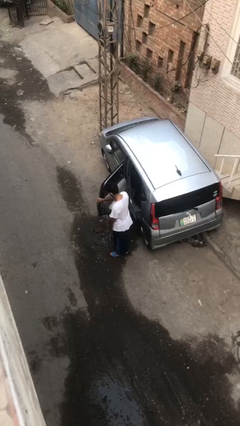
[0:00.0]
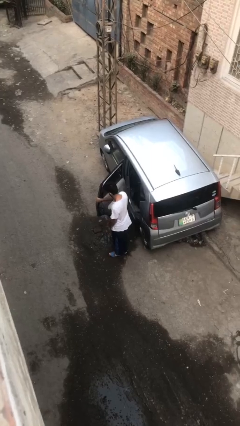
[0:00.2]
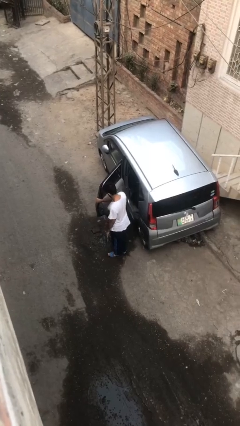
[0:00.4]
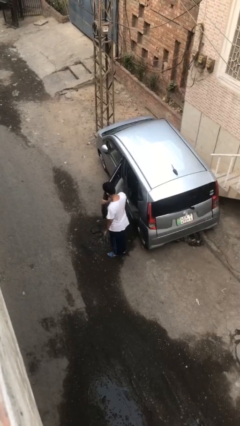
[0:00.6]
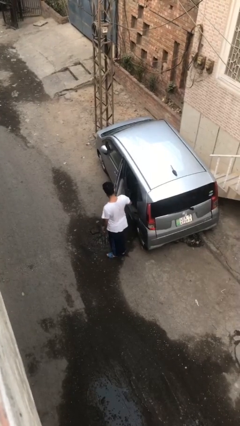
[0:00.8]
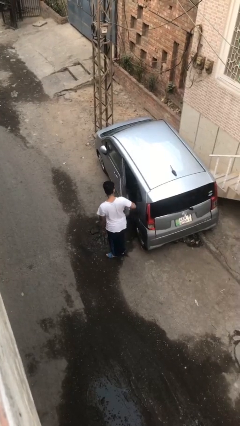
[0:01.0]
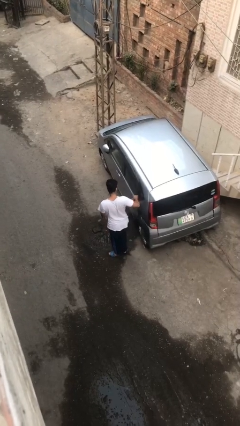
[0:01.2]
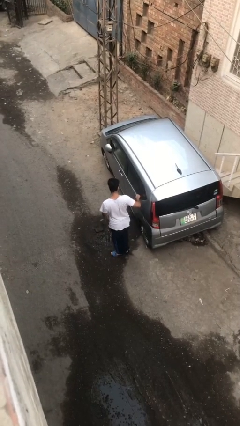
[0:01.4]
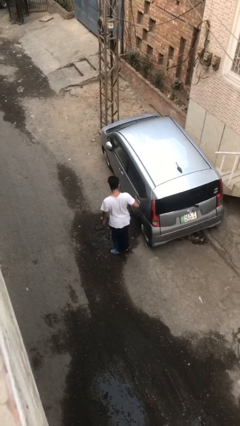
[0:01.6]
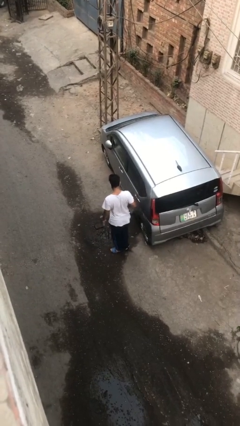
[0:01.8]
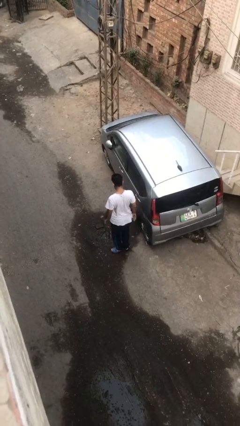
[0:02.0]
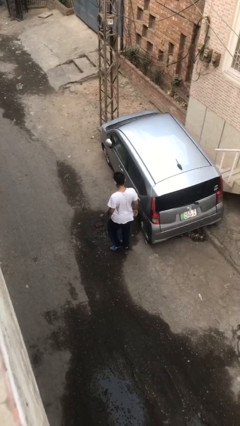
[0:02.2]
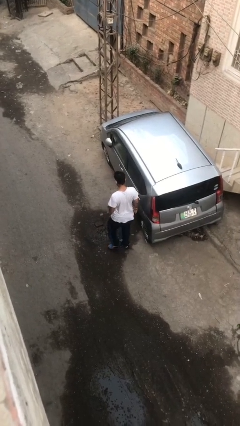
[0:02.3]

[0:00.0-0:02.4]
person closes car door

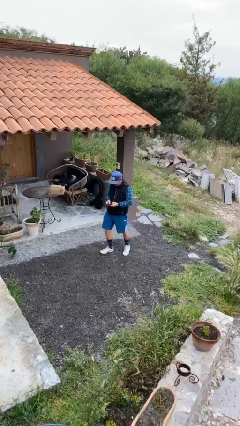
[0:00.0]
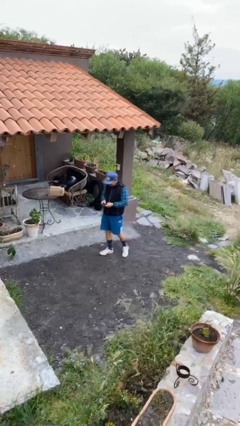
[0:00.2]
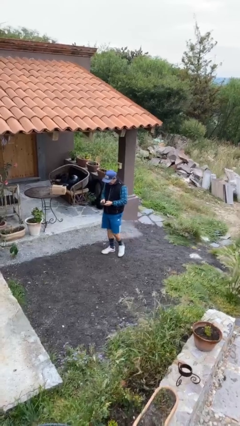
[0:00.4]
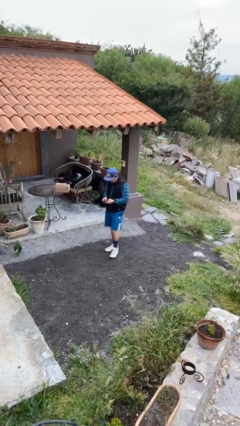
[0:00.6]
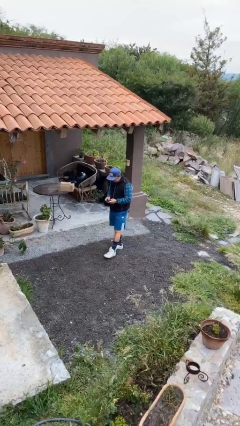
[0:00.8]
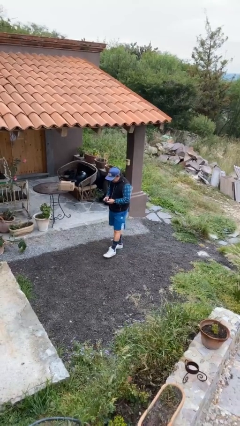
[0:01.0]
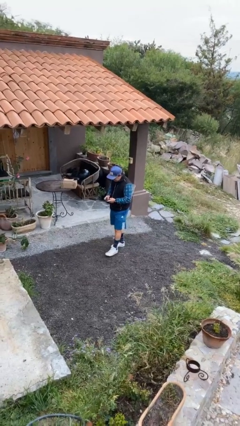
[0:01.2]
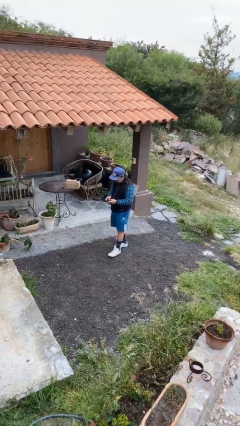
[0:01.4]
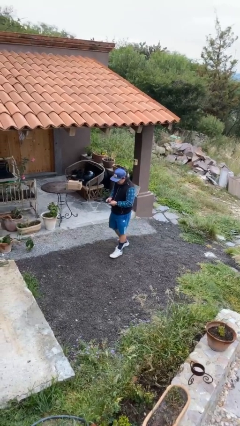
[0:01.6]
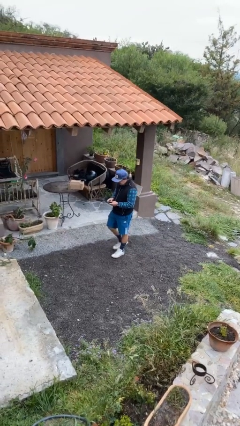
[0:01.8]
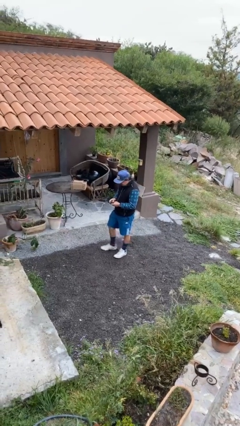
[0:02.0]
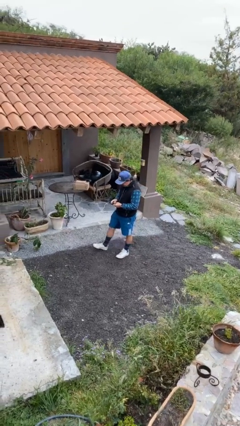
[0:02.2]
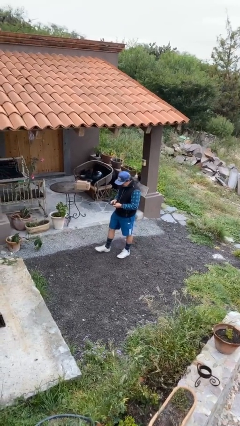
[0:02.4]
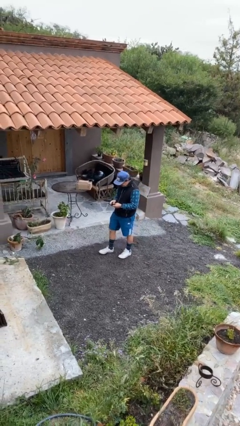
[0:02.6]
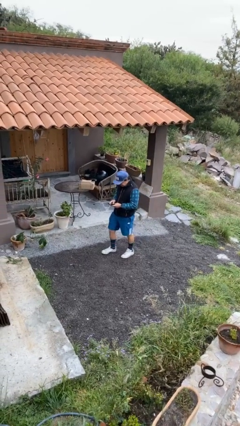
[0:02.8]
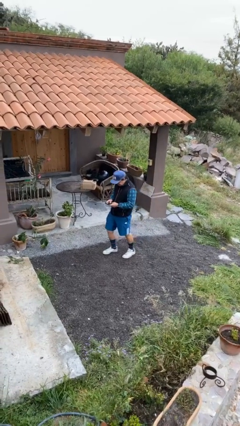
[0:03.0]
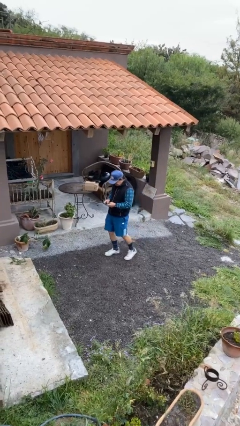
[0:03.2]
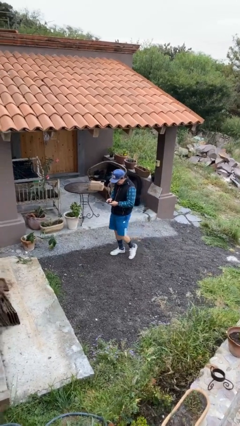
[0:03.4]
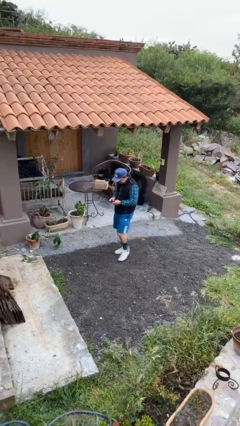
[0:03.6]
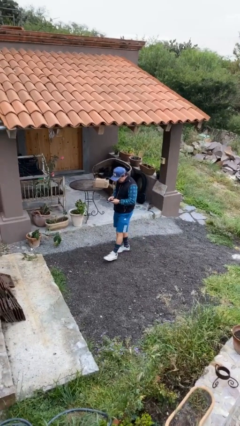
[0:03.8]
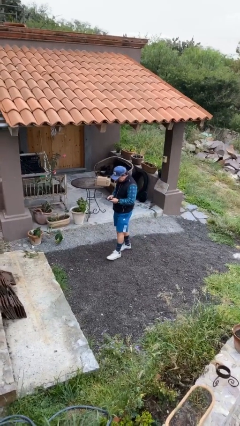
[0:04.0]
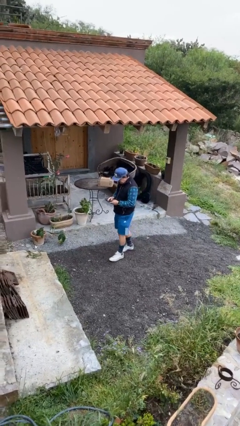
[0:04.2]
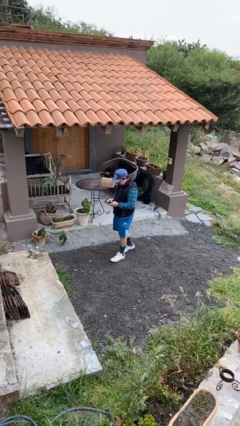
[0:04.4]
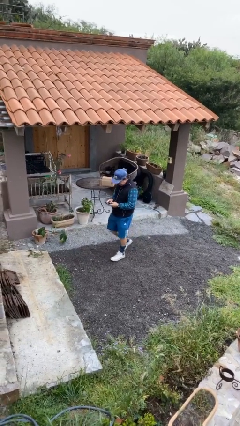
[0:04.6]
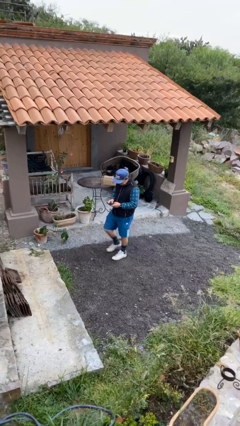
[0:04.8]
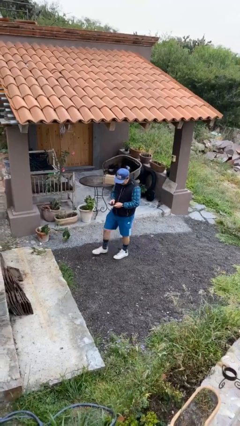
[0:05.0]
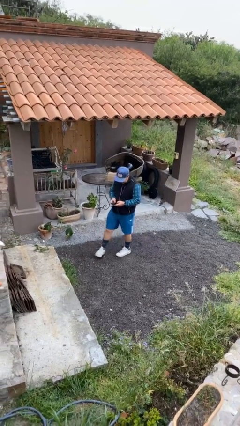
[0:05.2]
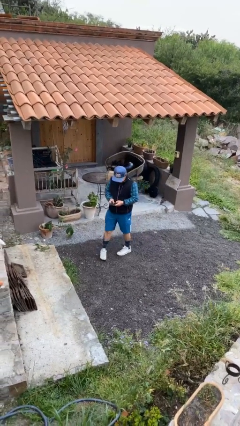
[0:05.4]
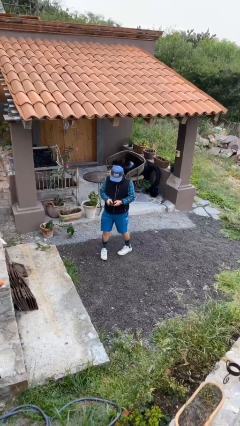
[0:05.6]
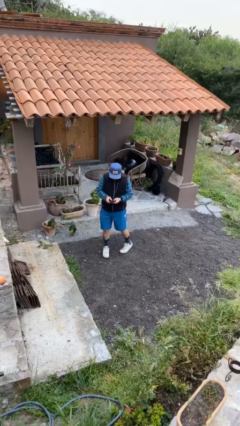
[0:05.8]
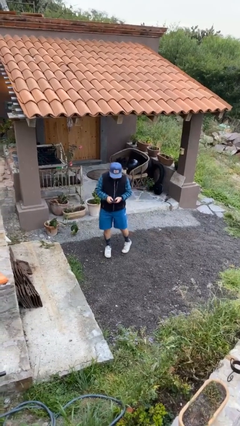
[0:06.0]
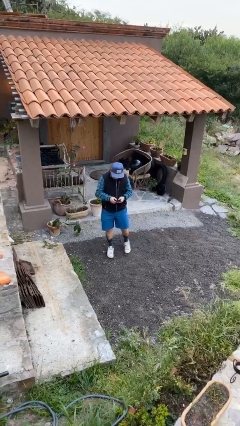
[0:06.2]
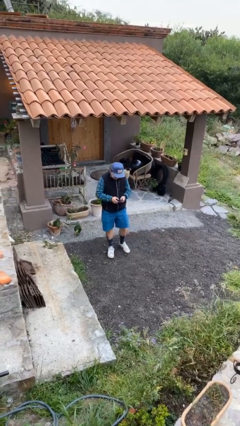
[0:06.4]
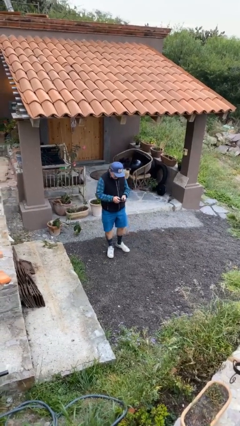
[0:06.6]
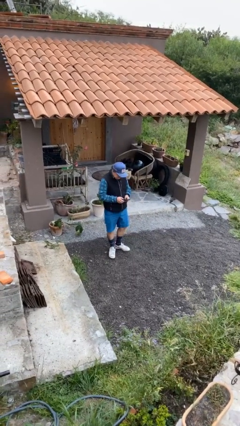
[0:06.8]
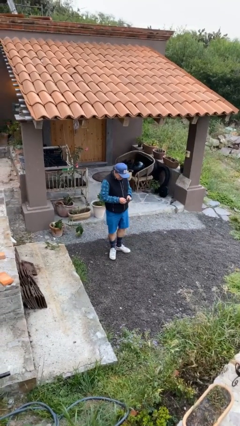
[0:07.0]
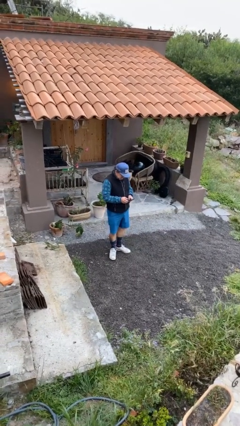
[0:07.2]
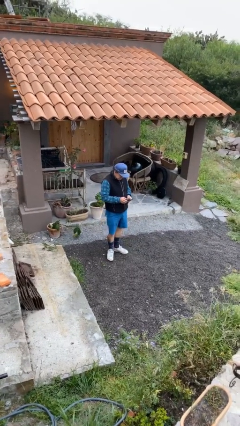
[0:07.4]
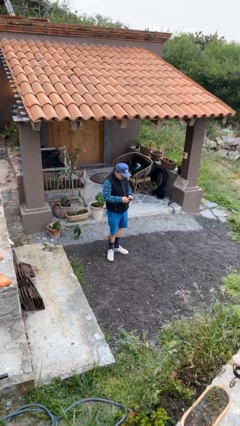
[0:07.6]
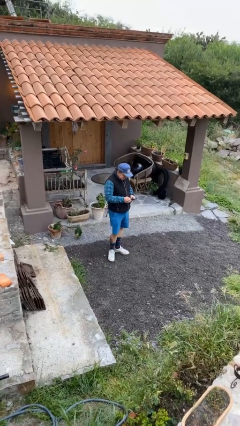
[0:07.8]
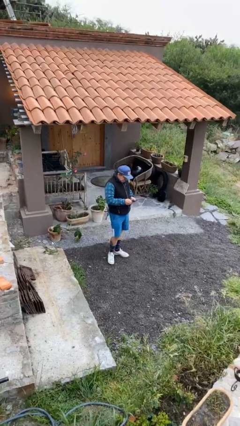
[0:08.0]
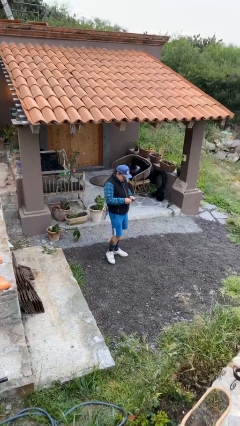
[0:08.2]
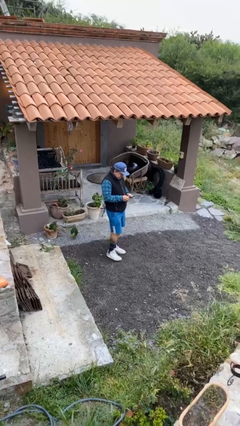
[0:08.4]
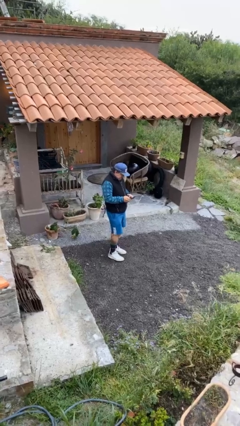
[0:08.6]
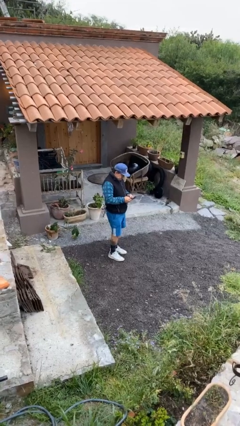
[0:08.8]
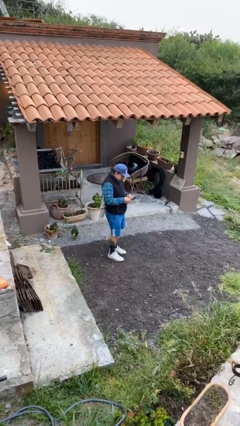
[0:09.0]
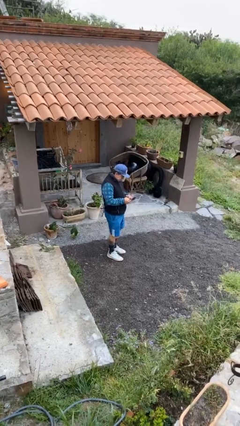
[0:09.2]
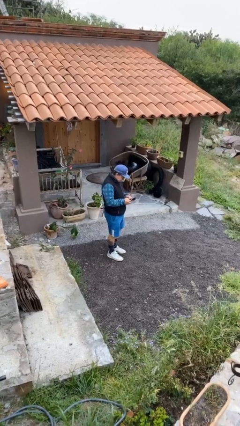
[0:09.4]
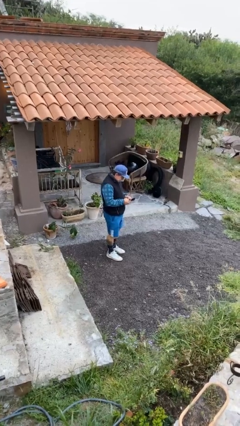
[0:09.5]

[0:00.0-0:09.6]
person texts on phone

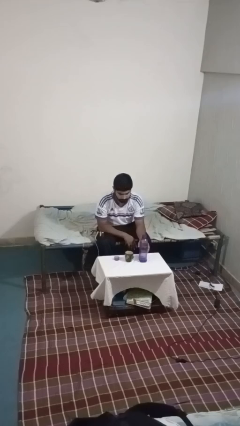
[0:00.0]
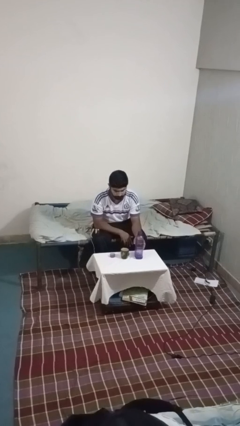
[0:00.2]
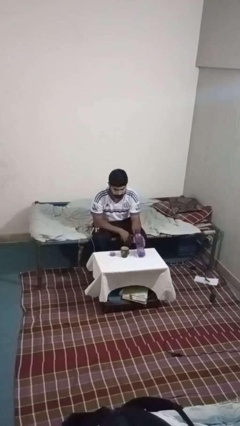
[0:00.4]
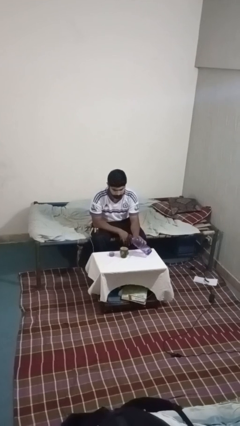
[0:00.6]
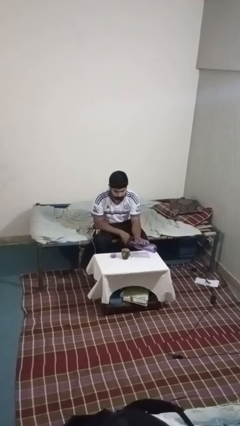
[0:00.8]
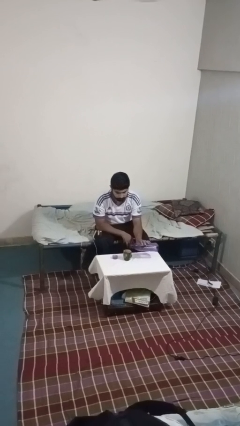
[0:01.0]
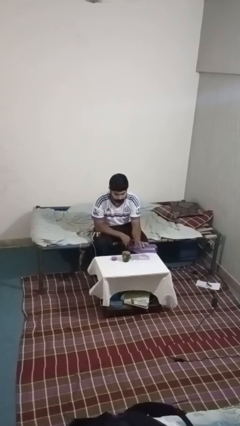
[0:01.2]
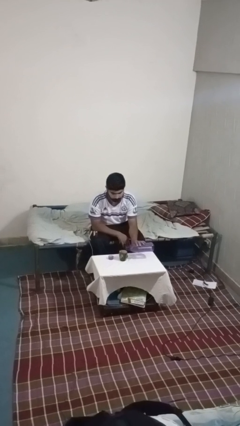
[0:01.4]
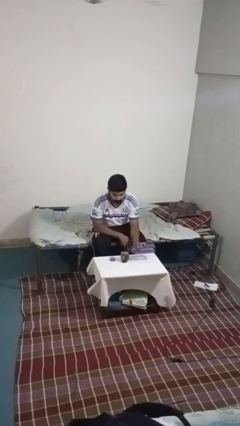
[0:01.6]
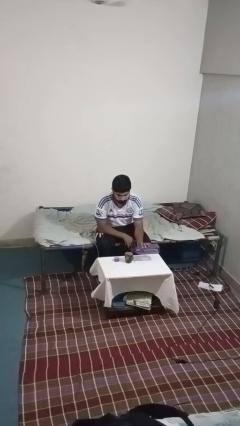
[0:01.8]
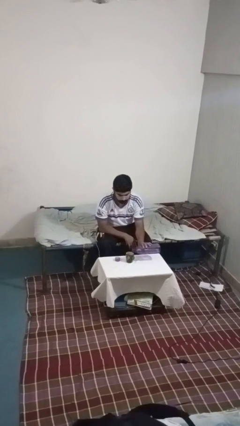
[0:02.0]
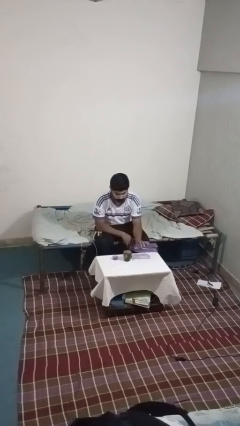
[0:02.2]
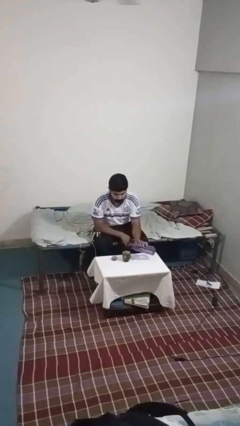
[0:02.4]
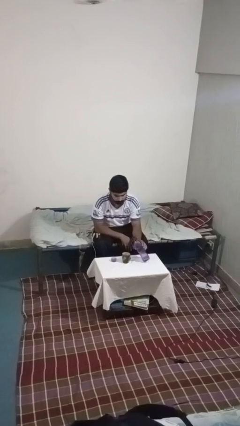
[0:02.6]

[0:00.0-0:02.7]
person pours liquid into cup

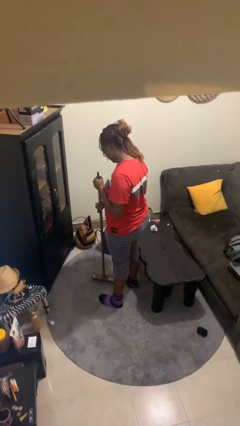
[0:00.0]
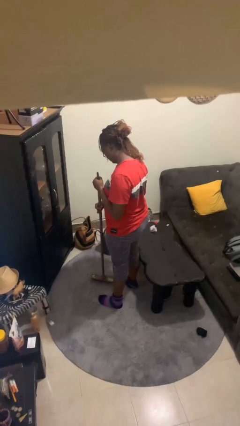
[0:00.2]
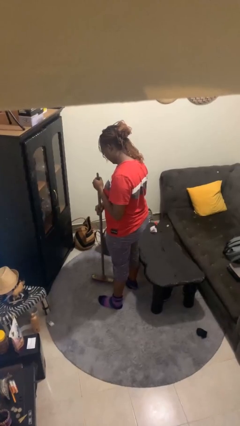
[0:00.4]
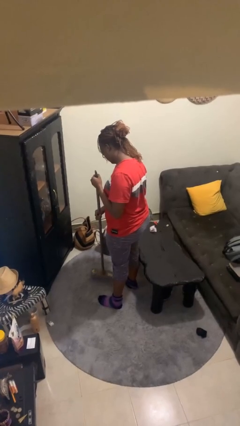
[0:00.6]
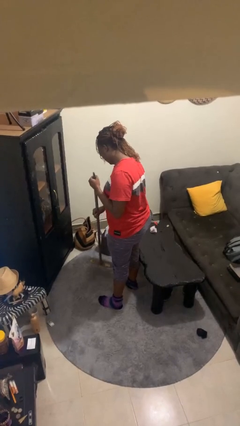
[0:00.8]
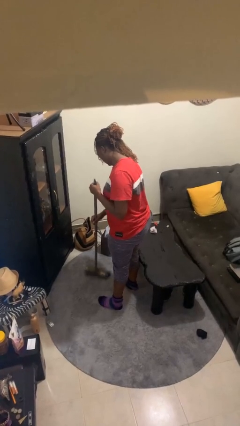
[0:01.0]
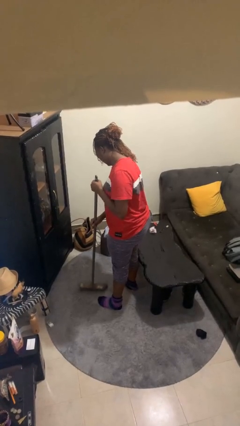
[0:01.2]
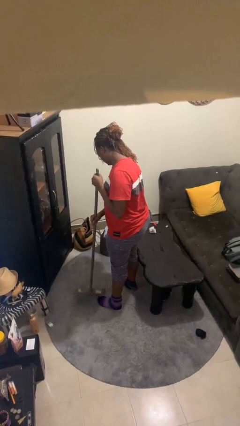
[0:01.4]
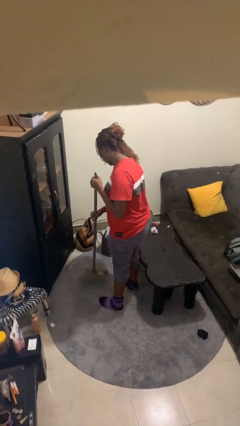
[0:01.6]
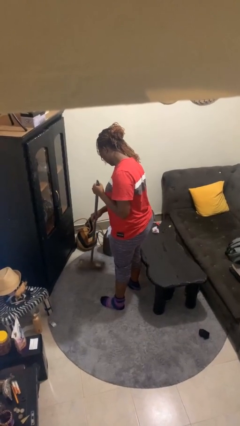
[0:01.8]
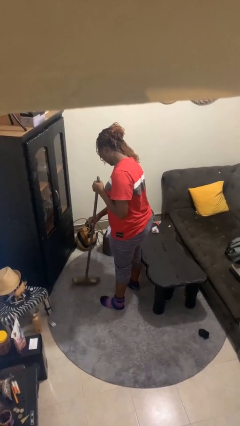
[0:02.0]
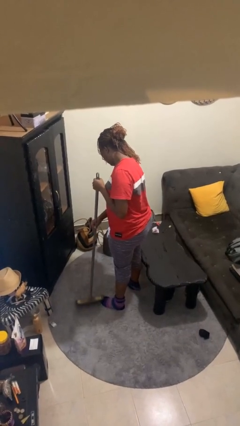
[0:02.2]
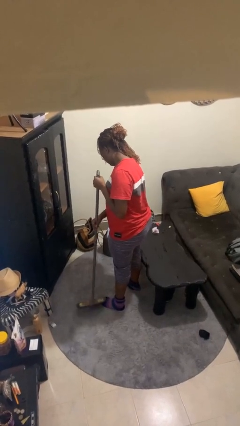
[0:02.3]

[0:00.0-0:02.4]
person sweeps floor

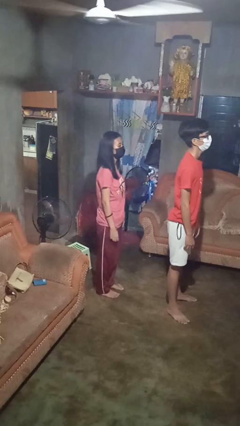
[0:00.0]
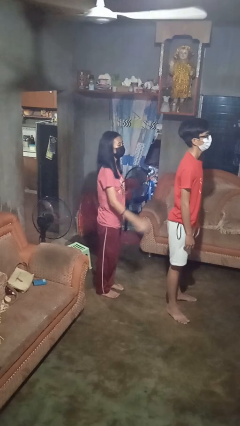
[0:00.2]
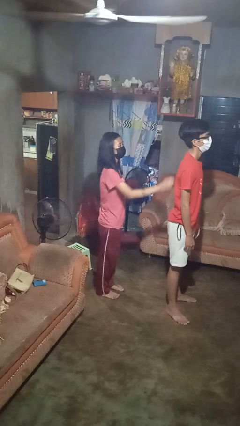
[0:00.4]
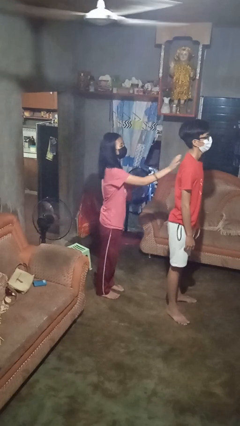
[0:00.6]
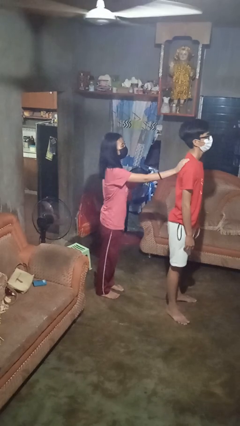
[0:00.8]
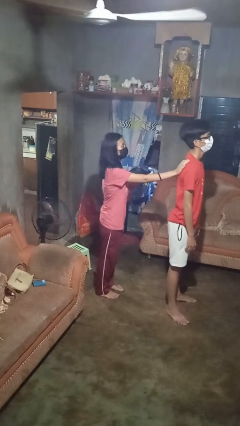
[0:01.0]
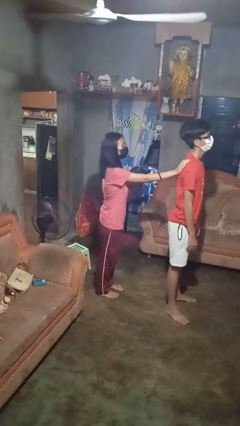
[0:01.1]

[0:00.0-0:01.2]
person touches back of person
